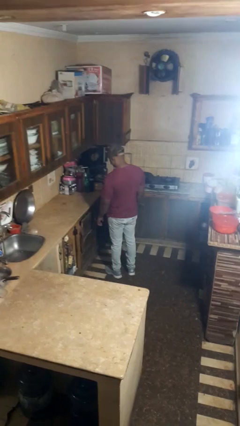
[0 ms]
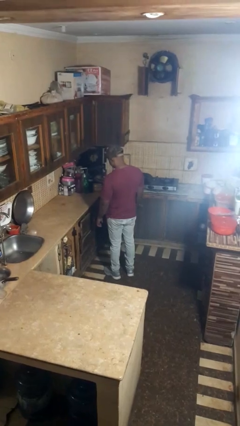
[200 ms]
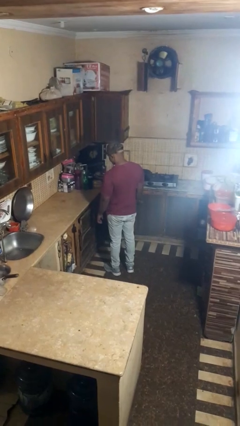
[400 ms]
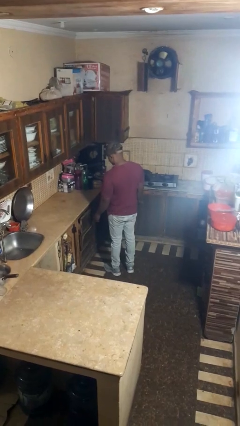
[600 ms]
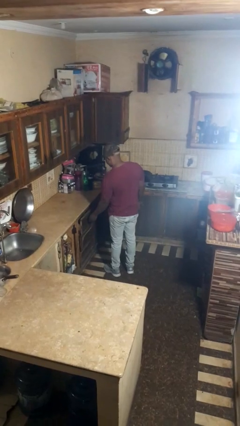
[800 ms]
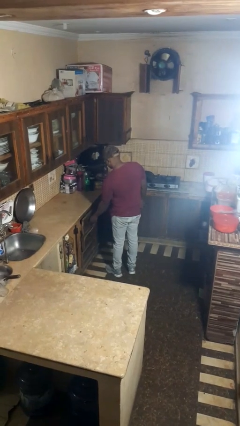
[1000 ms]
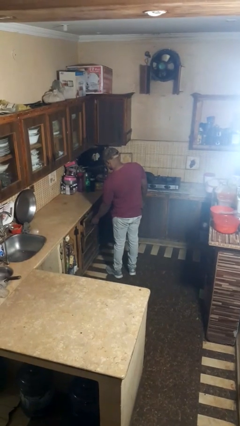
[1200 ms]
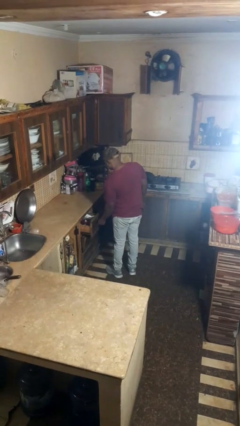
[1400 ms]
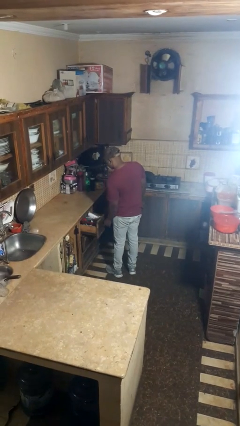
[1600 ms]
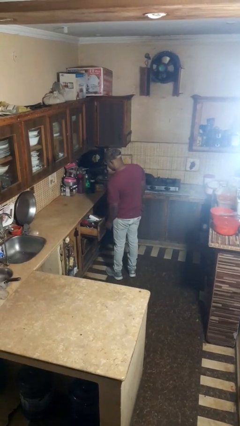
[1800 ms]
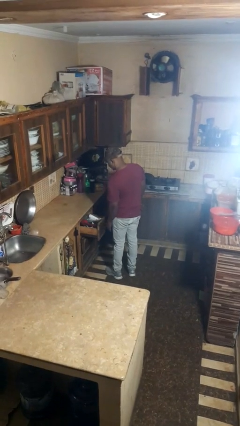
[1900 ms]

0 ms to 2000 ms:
person opens kitchen drawer

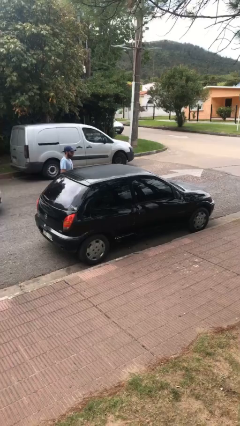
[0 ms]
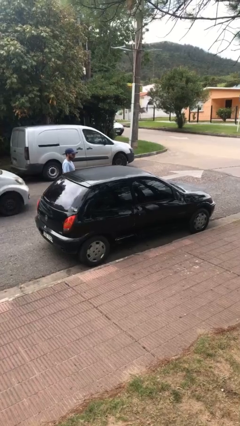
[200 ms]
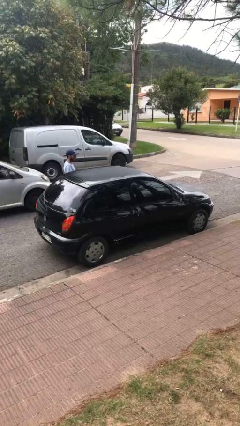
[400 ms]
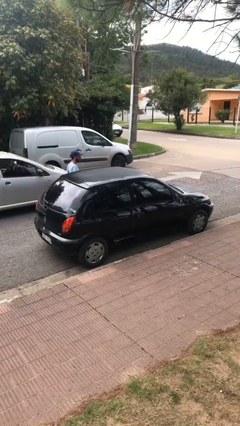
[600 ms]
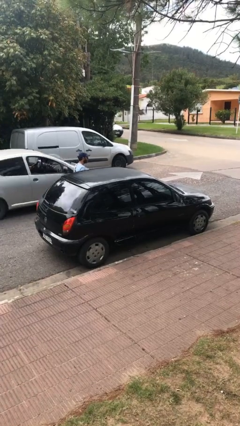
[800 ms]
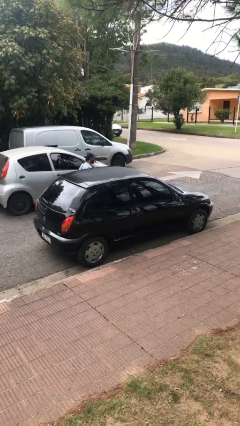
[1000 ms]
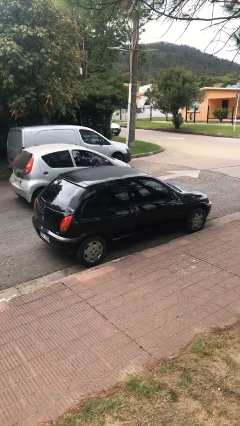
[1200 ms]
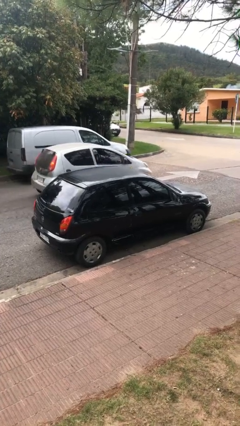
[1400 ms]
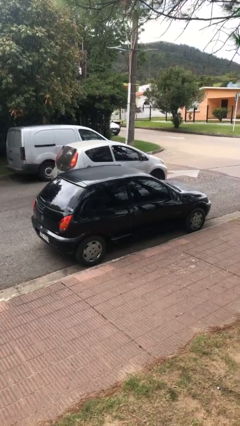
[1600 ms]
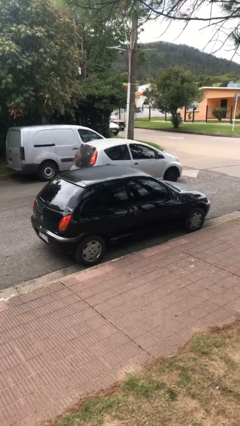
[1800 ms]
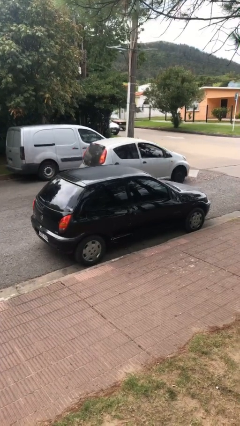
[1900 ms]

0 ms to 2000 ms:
car picks up person

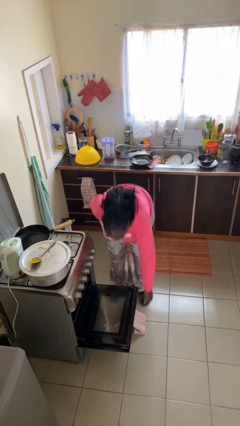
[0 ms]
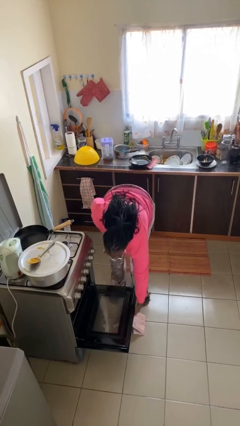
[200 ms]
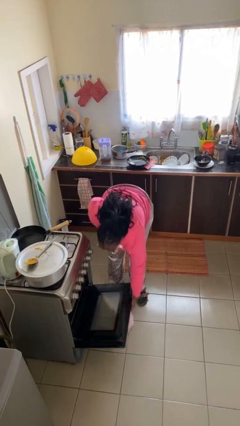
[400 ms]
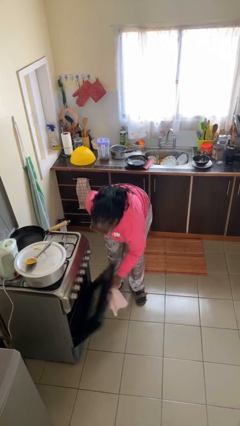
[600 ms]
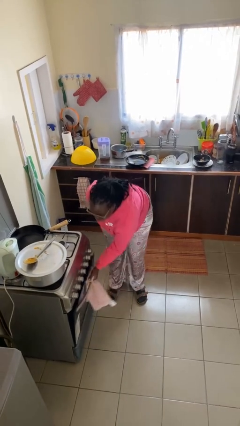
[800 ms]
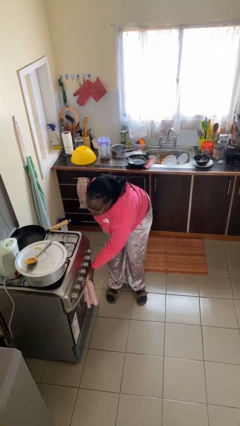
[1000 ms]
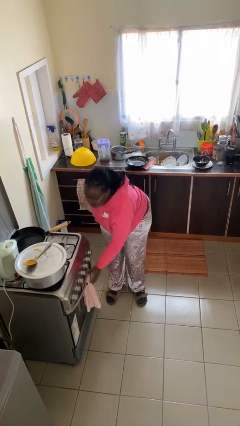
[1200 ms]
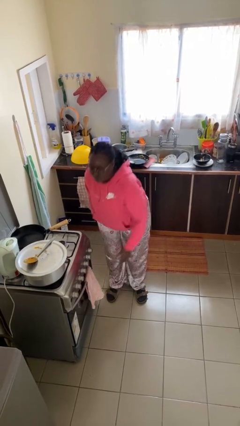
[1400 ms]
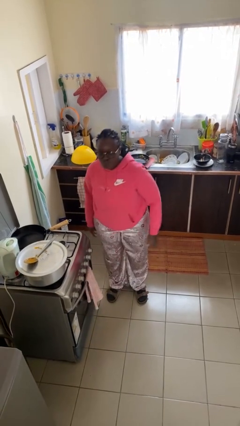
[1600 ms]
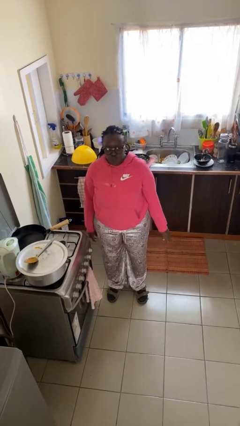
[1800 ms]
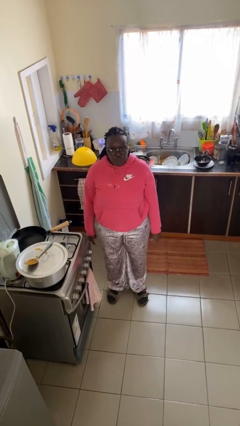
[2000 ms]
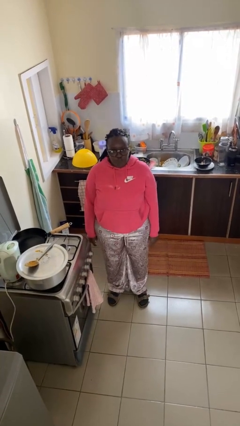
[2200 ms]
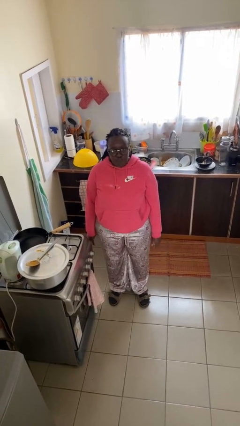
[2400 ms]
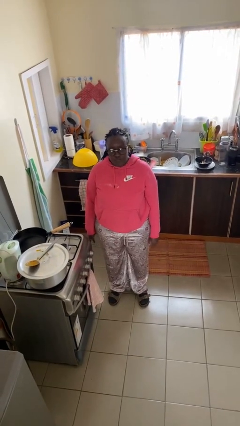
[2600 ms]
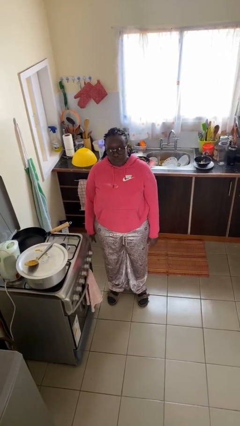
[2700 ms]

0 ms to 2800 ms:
person closes oven door

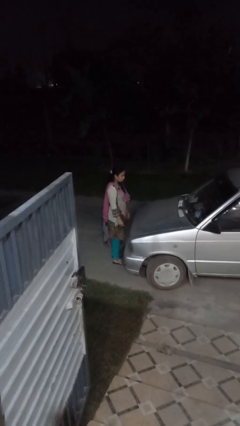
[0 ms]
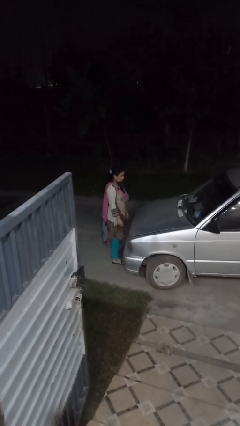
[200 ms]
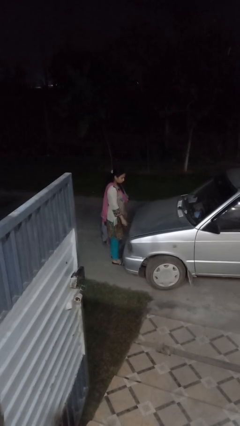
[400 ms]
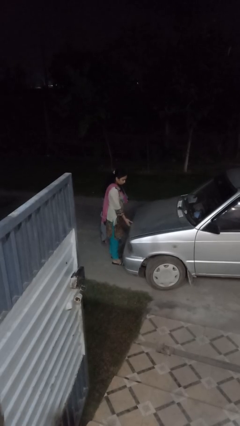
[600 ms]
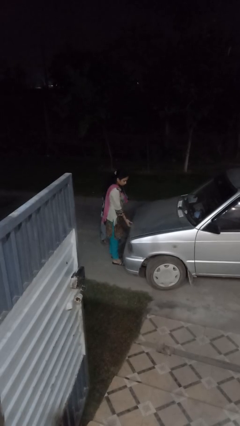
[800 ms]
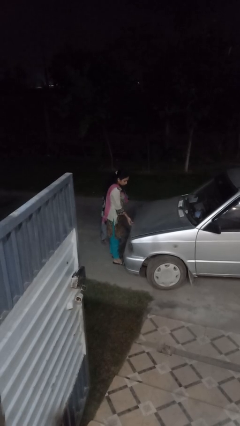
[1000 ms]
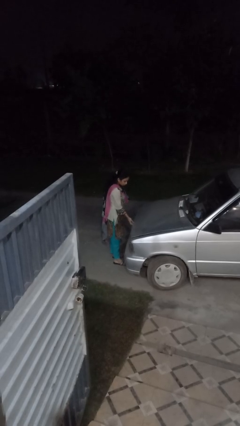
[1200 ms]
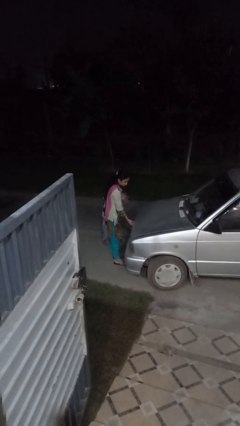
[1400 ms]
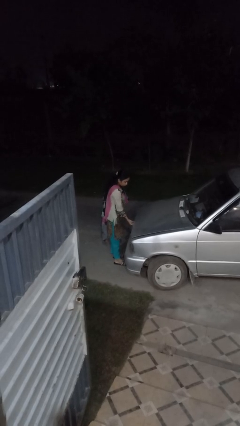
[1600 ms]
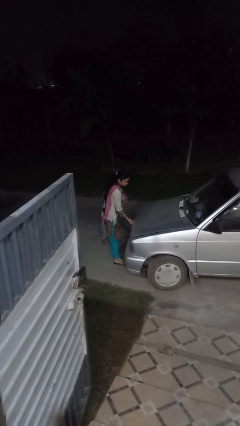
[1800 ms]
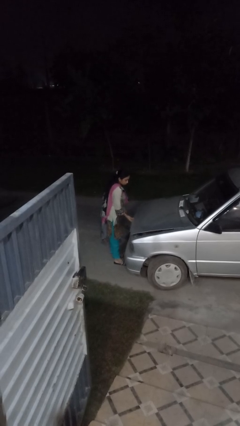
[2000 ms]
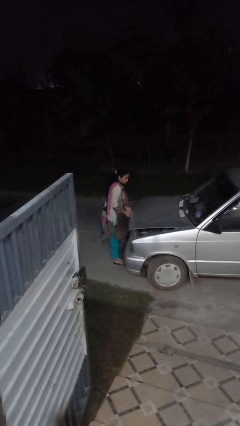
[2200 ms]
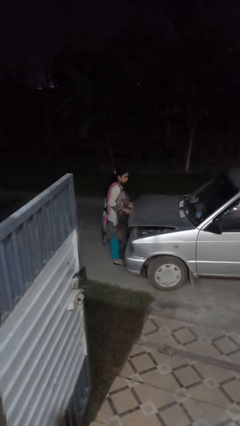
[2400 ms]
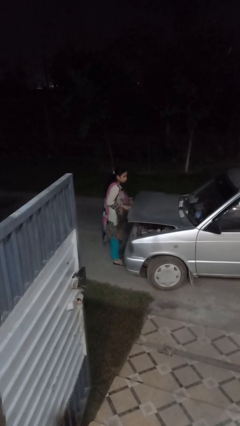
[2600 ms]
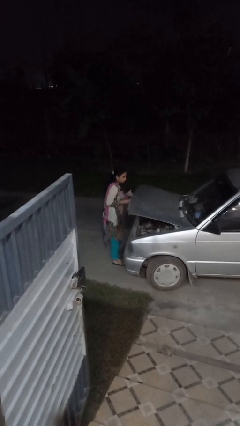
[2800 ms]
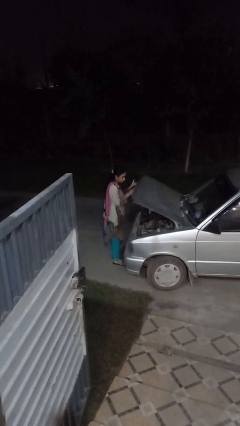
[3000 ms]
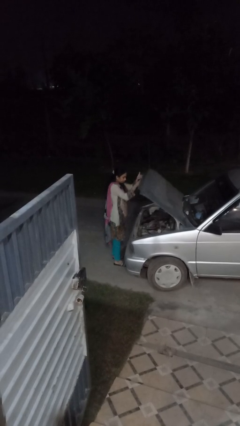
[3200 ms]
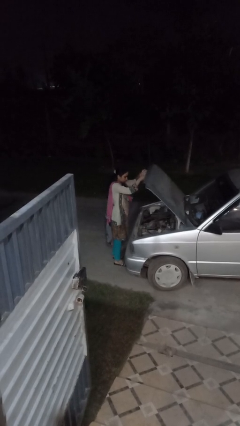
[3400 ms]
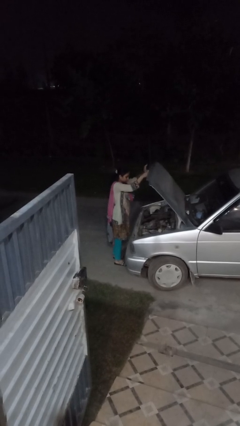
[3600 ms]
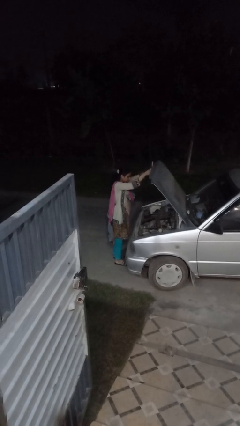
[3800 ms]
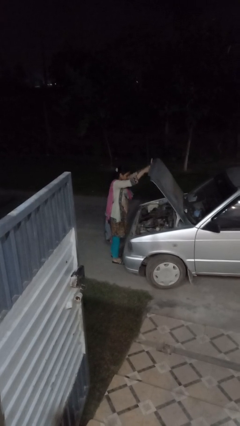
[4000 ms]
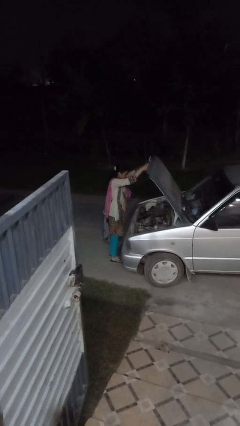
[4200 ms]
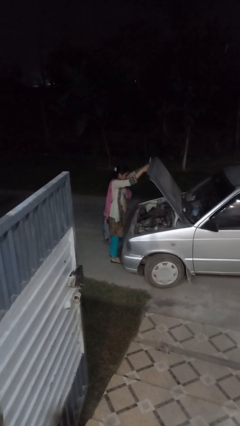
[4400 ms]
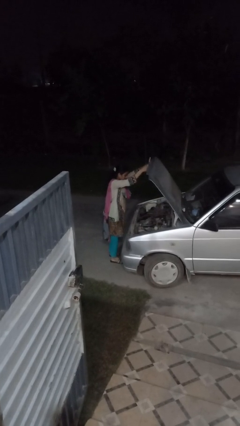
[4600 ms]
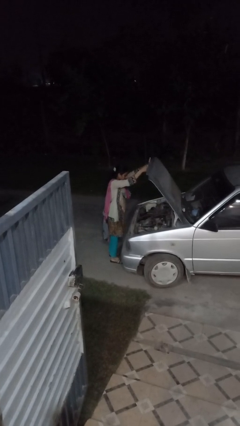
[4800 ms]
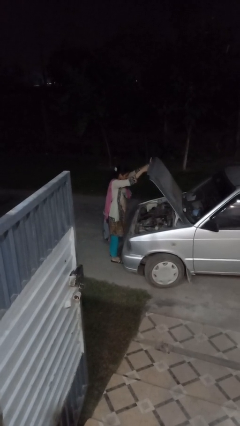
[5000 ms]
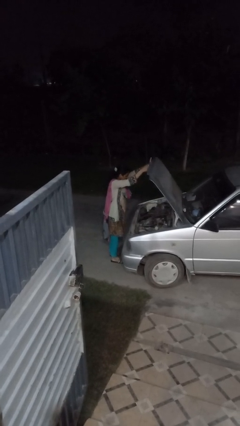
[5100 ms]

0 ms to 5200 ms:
person opens car hood

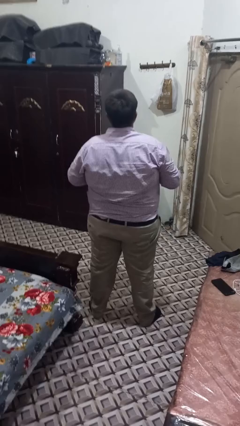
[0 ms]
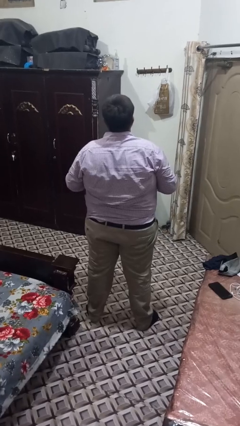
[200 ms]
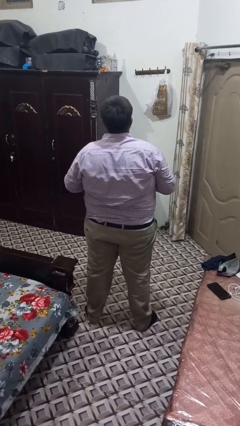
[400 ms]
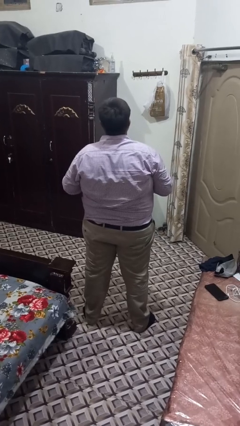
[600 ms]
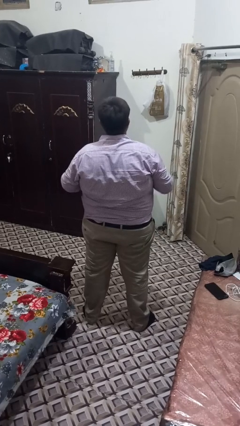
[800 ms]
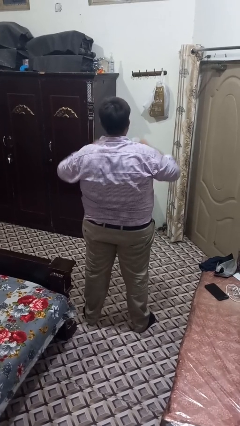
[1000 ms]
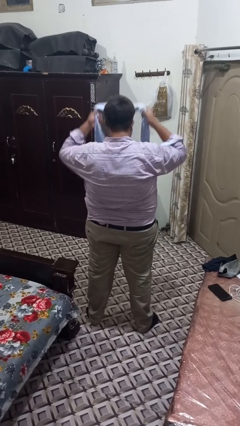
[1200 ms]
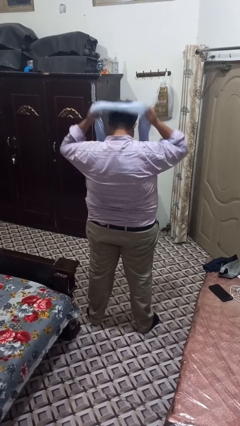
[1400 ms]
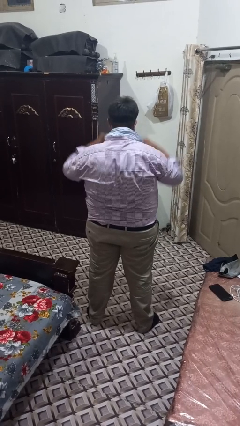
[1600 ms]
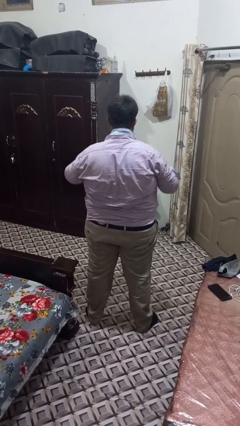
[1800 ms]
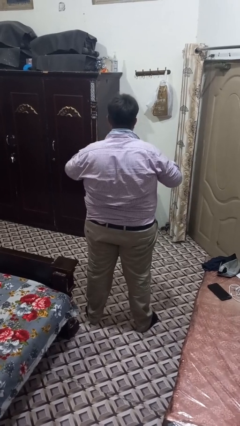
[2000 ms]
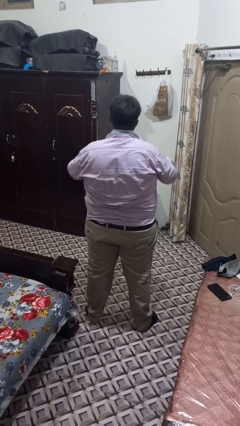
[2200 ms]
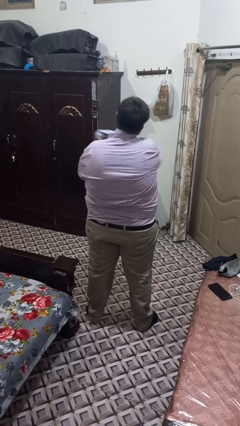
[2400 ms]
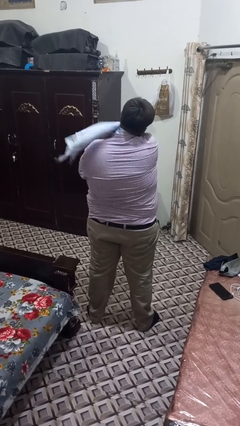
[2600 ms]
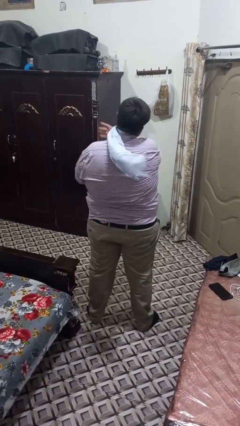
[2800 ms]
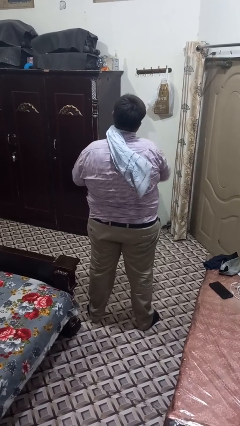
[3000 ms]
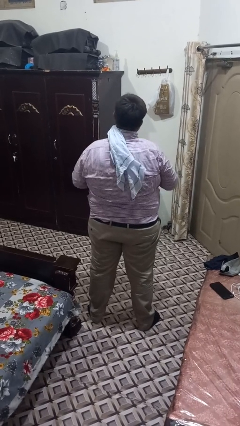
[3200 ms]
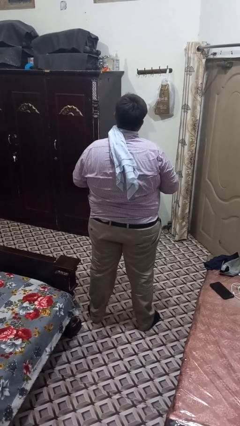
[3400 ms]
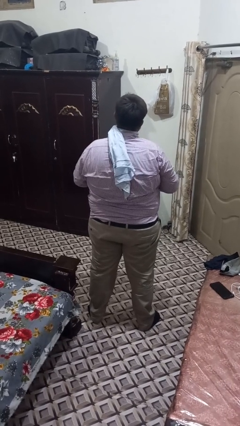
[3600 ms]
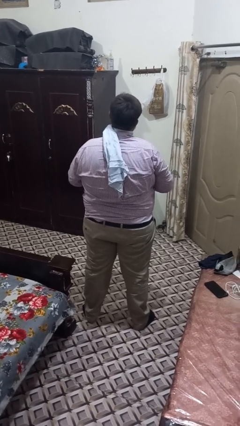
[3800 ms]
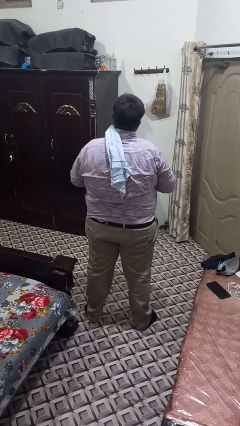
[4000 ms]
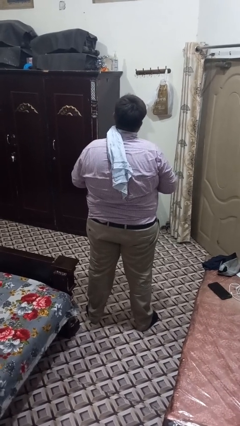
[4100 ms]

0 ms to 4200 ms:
person puts on scarf

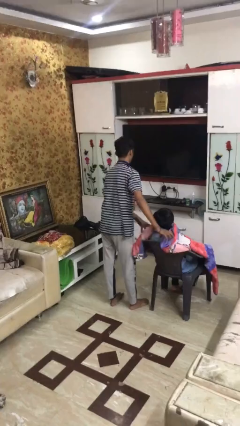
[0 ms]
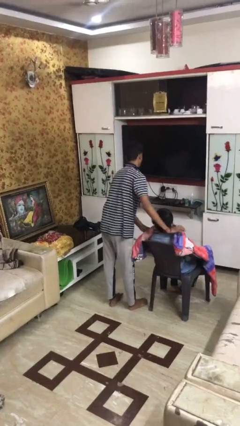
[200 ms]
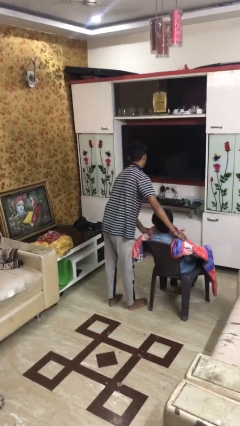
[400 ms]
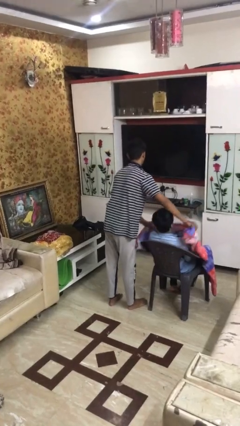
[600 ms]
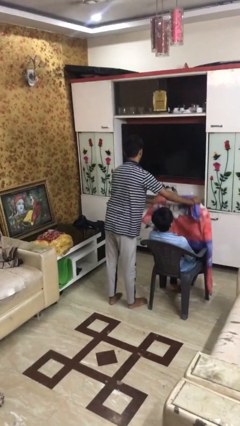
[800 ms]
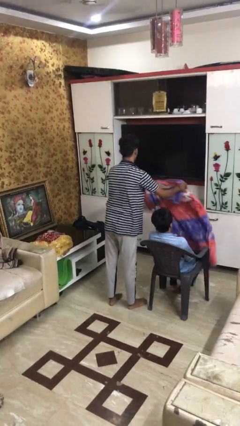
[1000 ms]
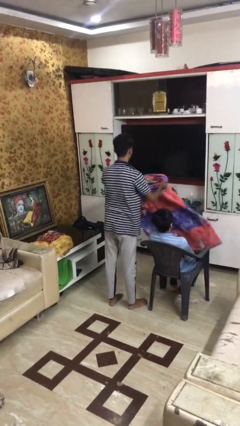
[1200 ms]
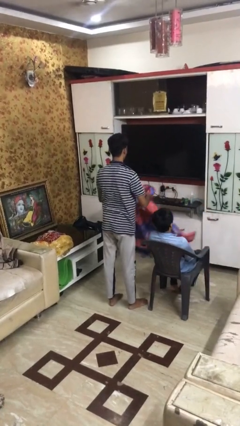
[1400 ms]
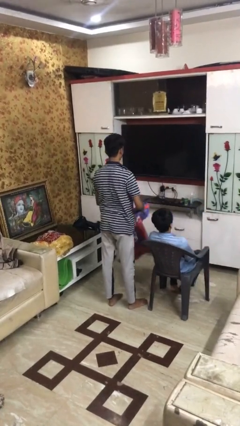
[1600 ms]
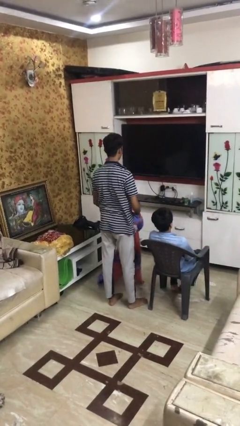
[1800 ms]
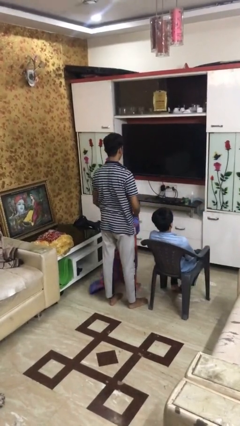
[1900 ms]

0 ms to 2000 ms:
person uncovers friend with blanket
